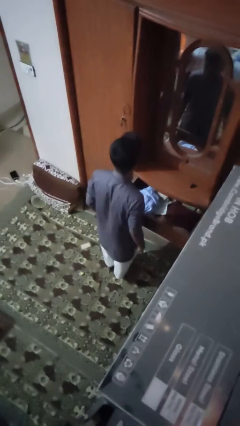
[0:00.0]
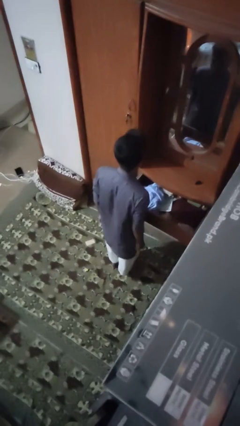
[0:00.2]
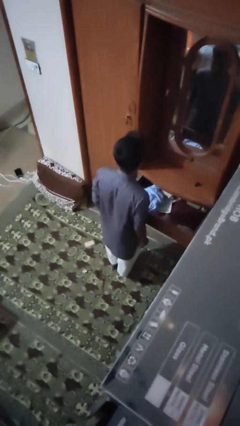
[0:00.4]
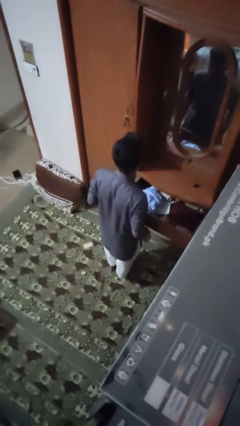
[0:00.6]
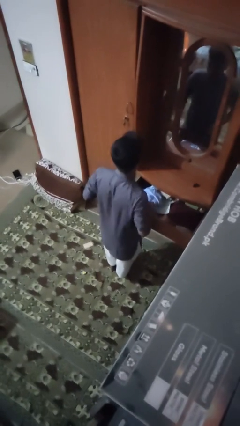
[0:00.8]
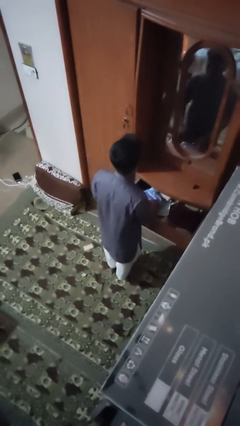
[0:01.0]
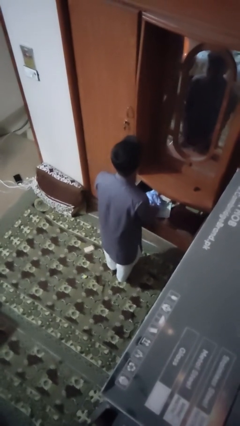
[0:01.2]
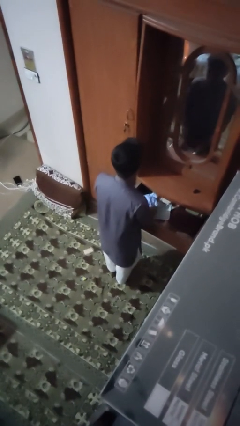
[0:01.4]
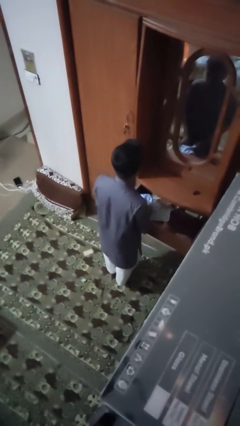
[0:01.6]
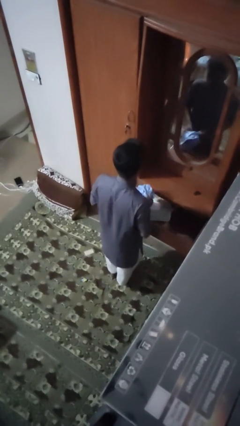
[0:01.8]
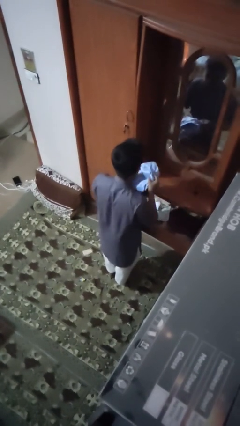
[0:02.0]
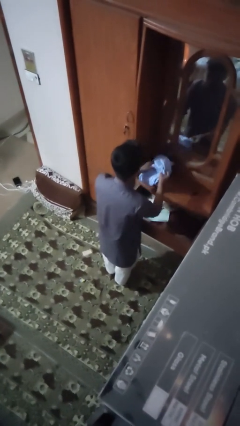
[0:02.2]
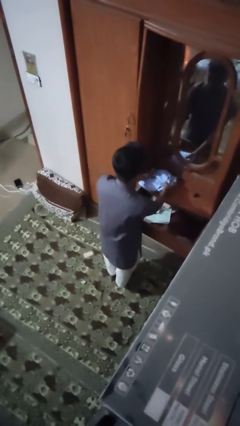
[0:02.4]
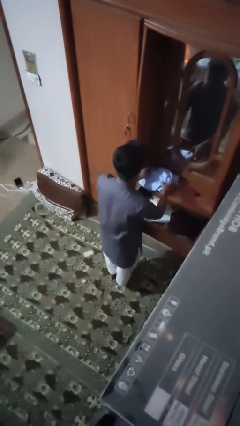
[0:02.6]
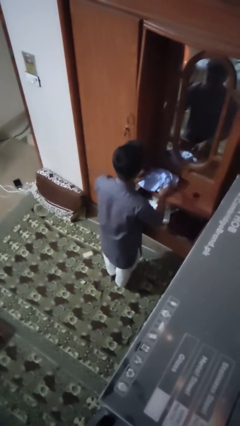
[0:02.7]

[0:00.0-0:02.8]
person takes clothes from dresser

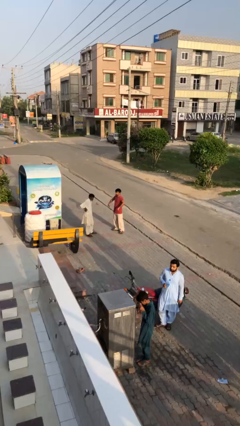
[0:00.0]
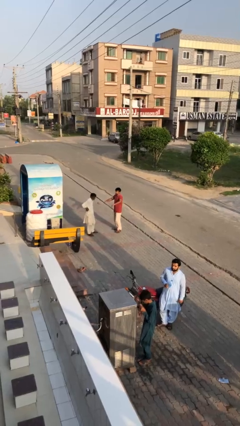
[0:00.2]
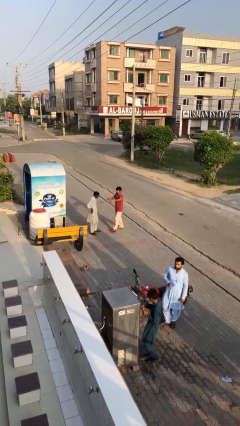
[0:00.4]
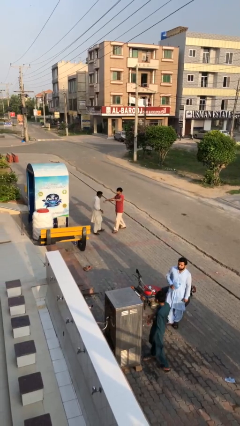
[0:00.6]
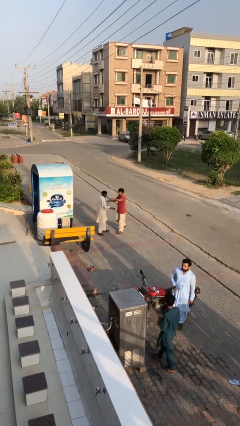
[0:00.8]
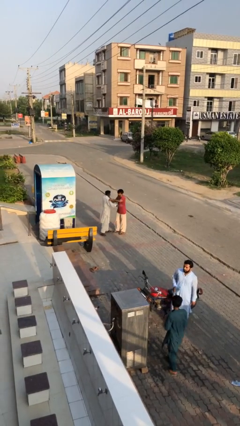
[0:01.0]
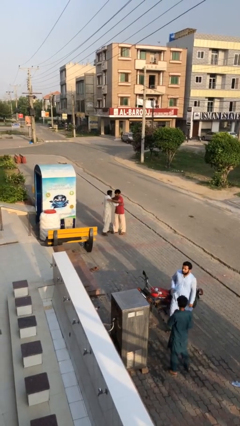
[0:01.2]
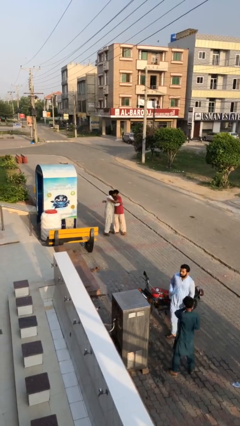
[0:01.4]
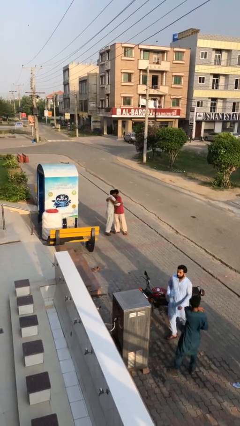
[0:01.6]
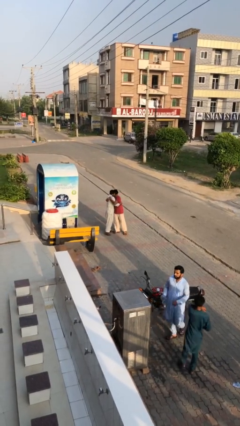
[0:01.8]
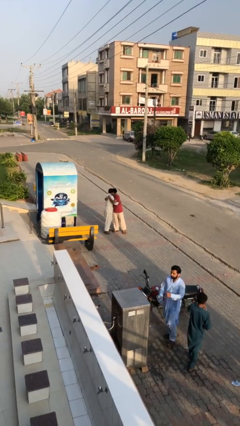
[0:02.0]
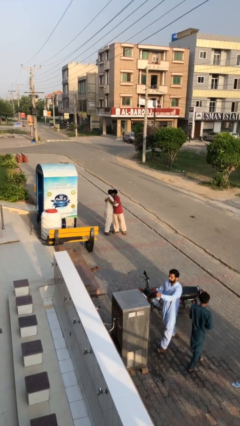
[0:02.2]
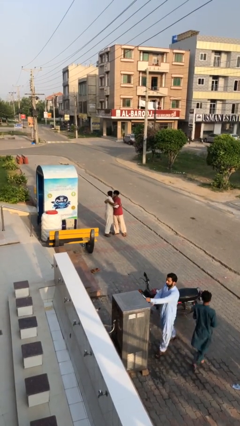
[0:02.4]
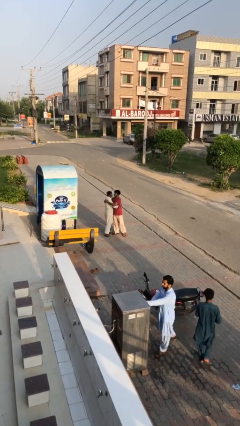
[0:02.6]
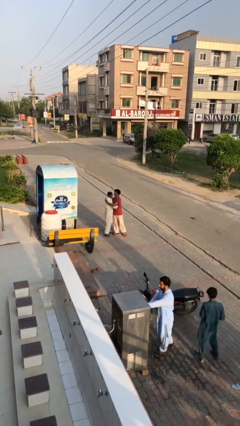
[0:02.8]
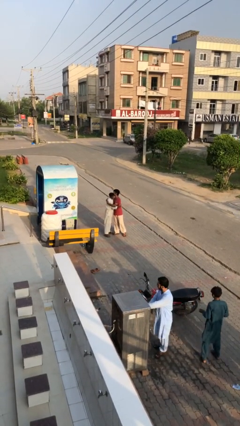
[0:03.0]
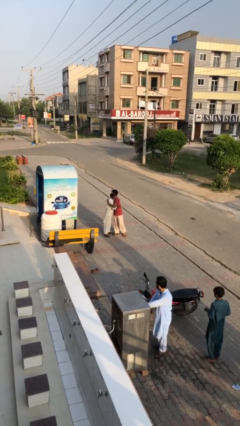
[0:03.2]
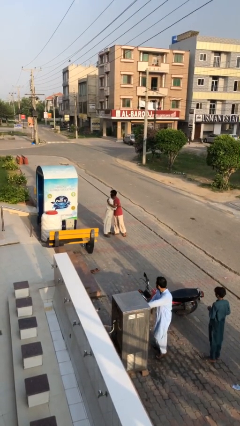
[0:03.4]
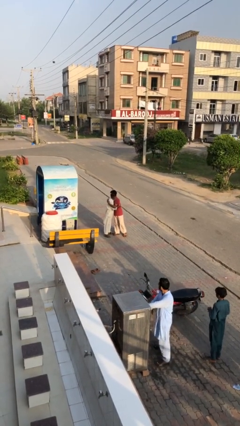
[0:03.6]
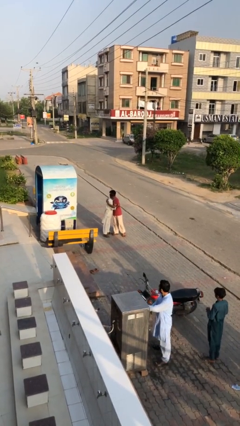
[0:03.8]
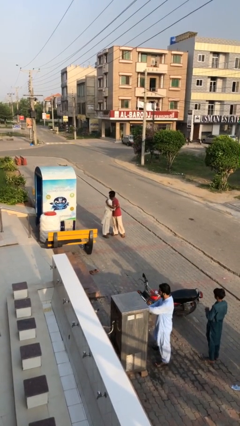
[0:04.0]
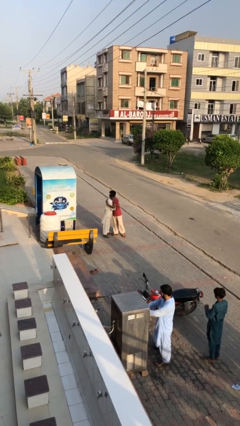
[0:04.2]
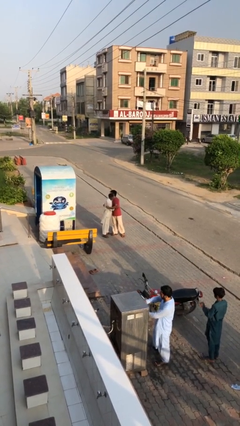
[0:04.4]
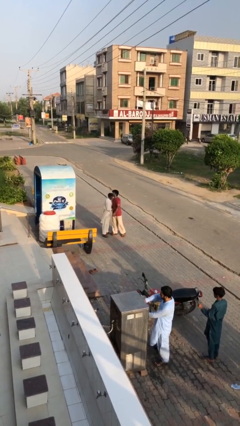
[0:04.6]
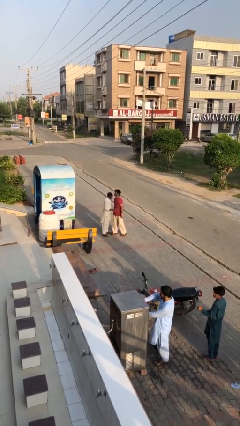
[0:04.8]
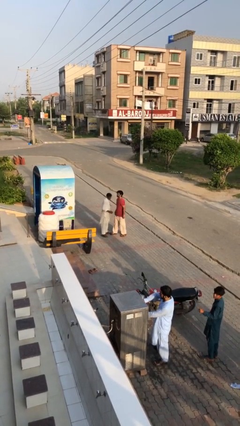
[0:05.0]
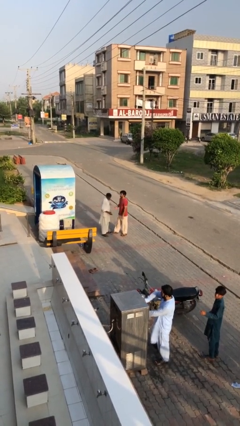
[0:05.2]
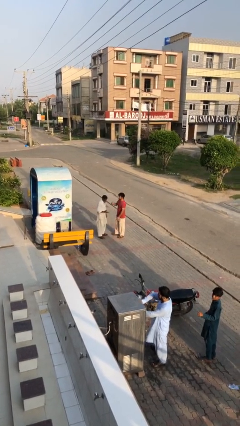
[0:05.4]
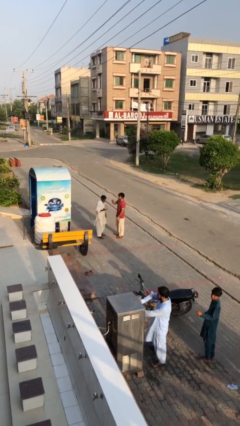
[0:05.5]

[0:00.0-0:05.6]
person embraces person

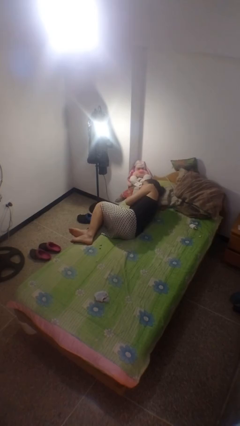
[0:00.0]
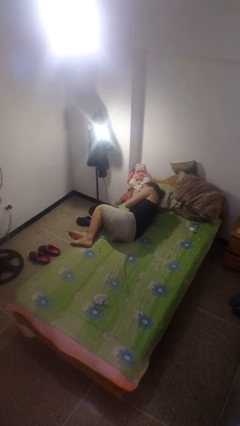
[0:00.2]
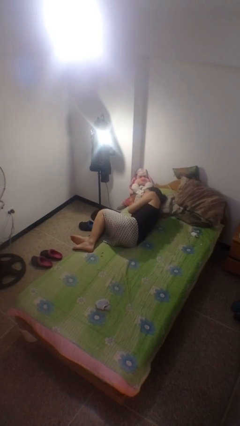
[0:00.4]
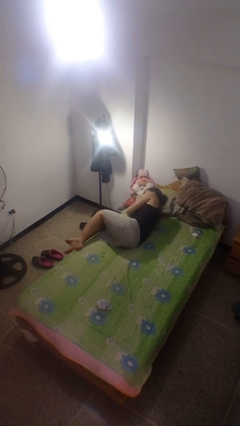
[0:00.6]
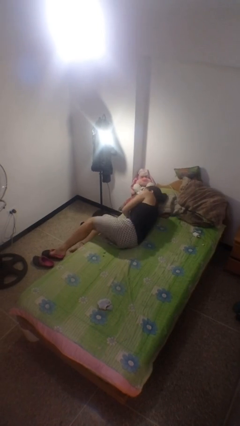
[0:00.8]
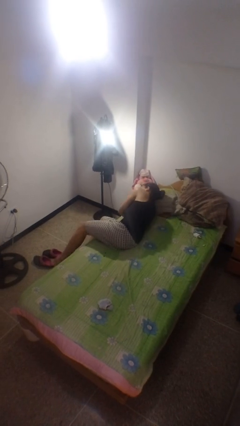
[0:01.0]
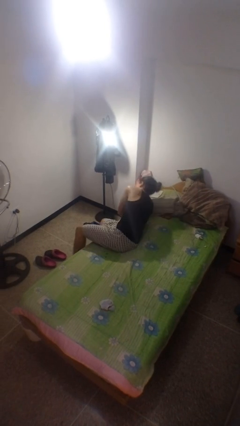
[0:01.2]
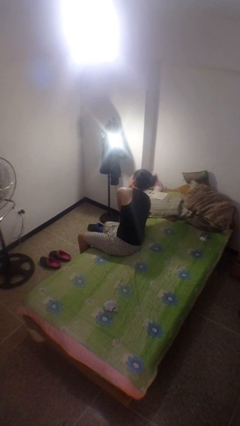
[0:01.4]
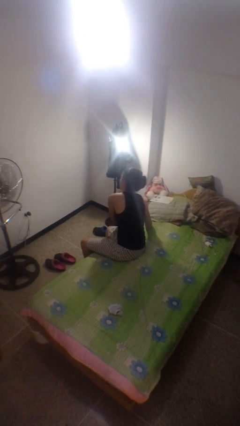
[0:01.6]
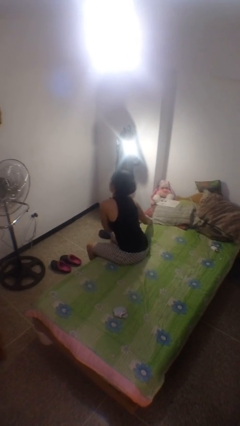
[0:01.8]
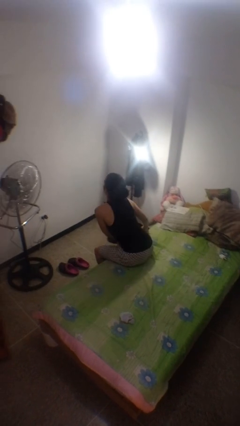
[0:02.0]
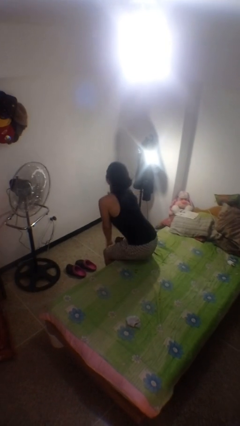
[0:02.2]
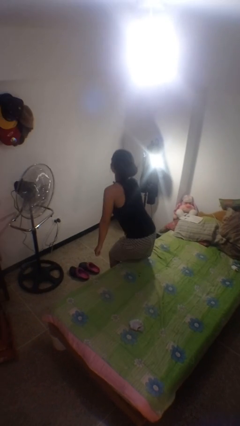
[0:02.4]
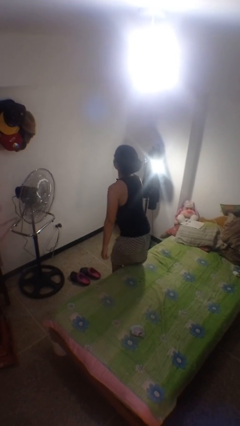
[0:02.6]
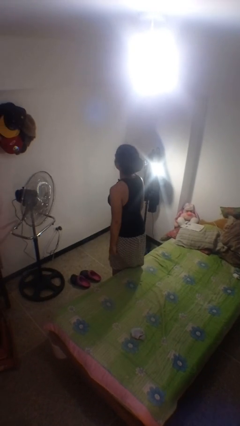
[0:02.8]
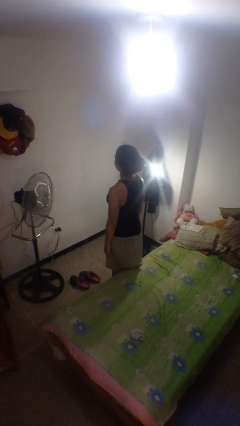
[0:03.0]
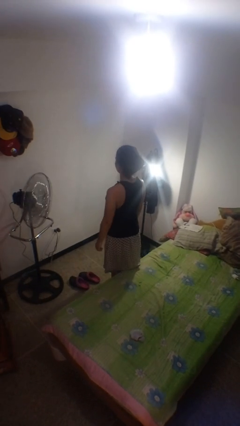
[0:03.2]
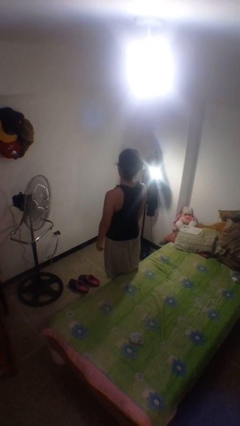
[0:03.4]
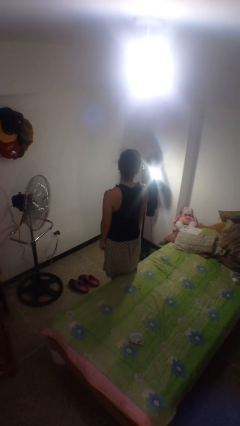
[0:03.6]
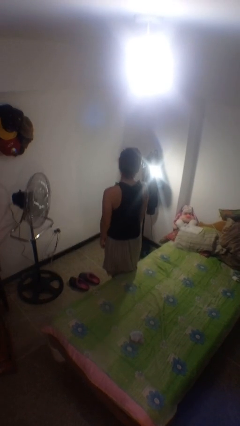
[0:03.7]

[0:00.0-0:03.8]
person stands up

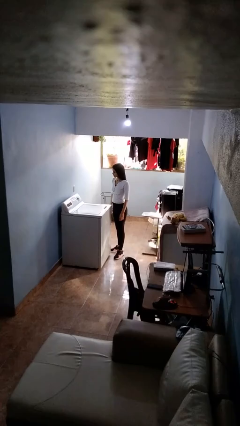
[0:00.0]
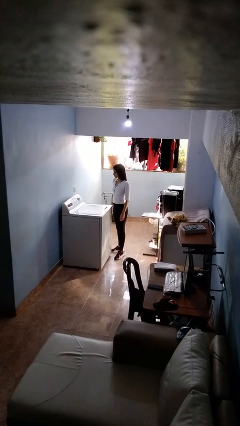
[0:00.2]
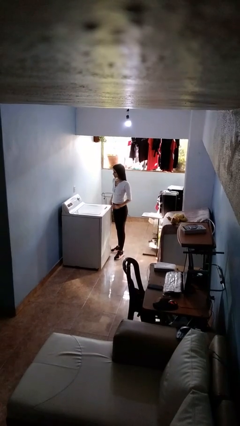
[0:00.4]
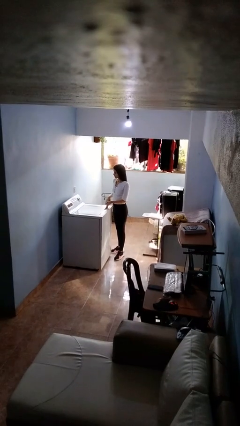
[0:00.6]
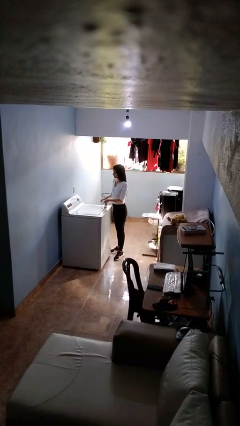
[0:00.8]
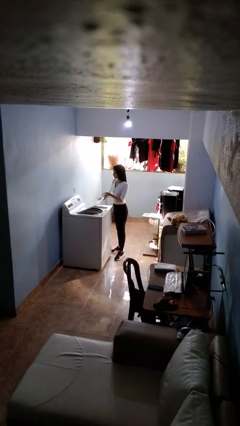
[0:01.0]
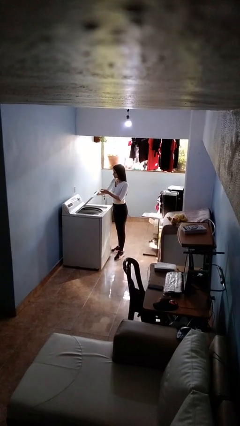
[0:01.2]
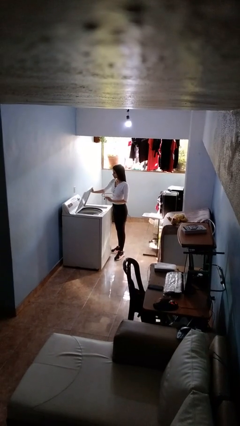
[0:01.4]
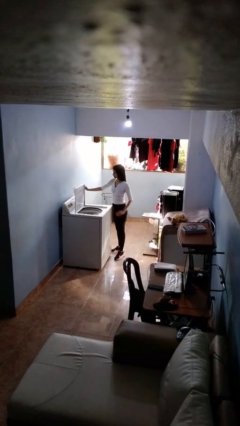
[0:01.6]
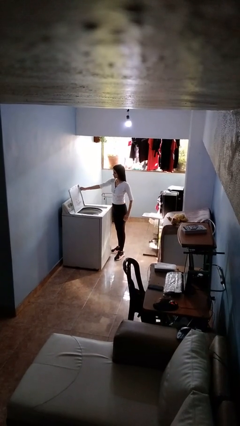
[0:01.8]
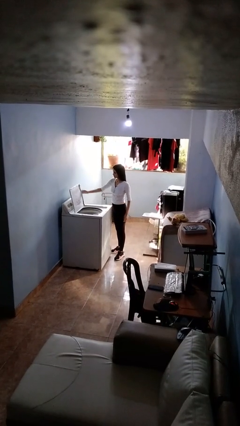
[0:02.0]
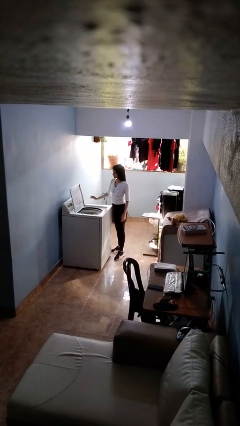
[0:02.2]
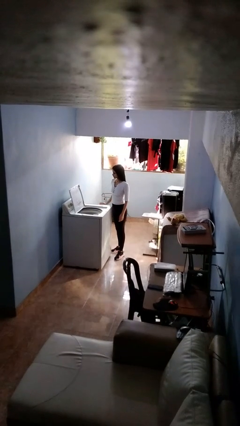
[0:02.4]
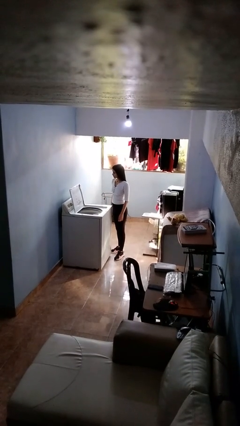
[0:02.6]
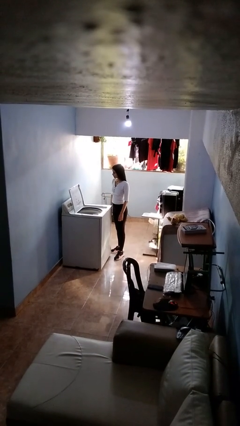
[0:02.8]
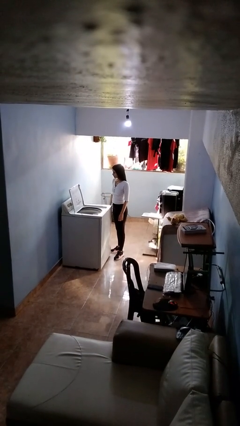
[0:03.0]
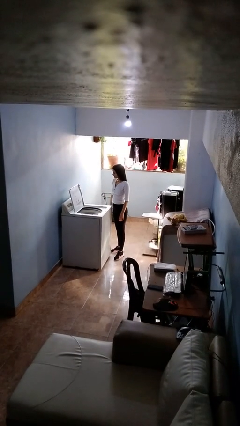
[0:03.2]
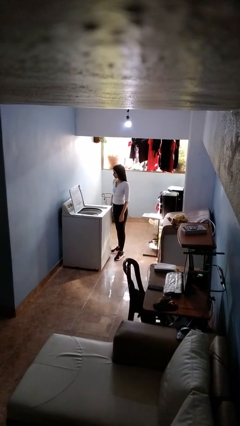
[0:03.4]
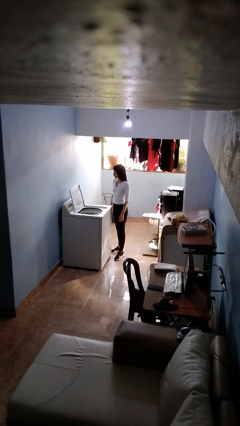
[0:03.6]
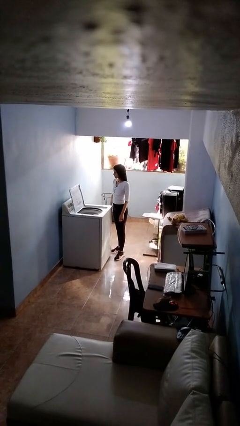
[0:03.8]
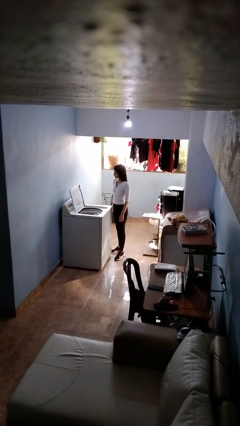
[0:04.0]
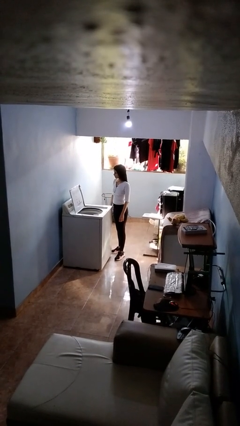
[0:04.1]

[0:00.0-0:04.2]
person opens clothes washer

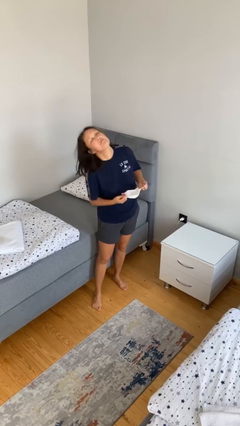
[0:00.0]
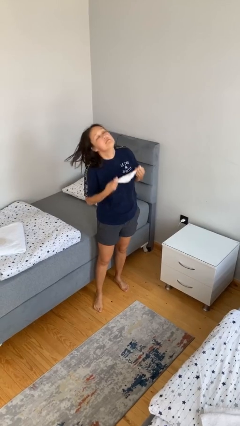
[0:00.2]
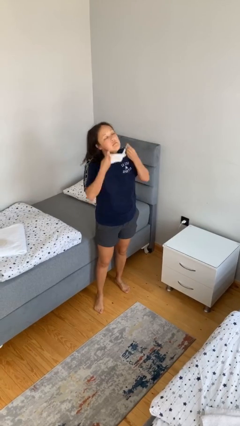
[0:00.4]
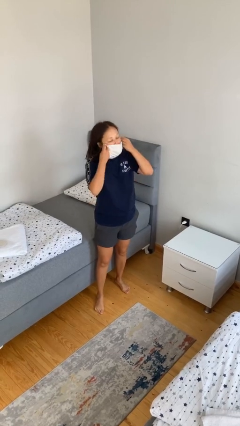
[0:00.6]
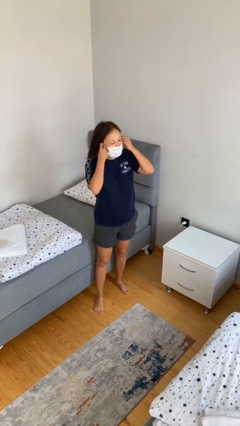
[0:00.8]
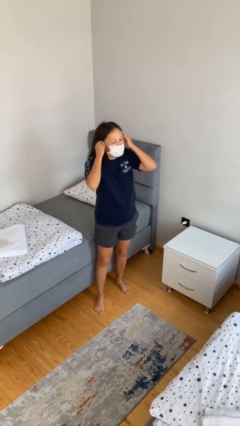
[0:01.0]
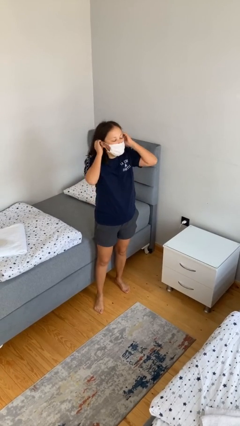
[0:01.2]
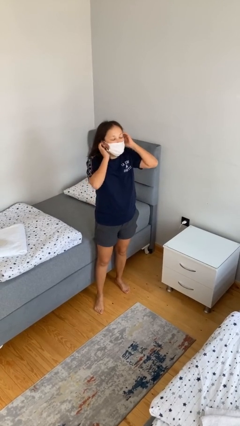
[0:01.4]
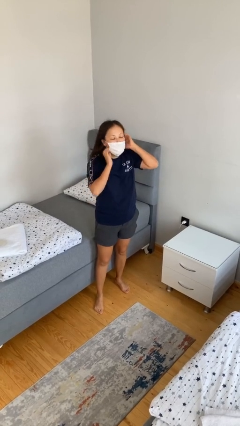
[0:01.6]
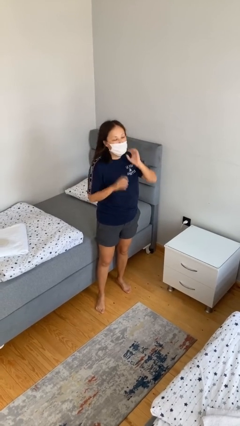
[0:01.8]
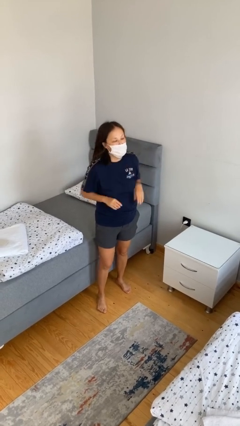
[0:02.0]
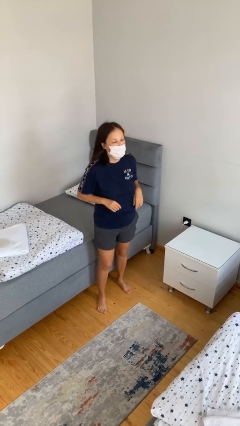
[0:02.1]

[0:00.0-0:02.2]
person puts on facemask
